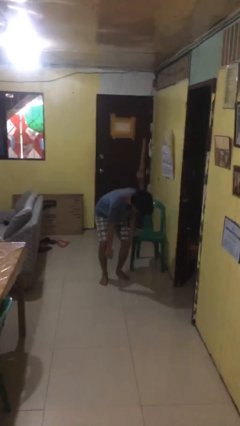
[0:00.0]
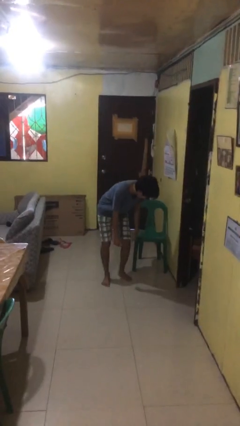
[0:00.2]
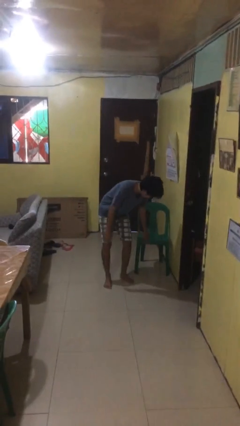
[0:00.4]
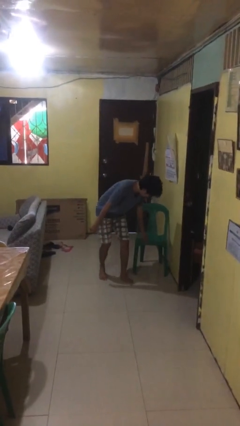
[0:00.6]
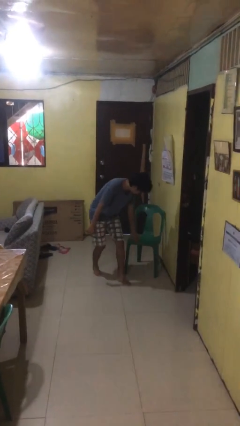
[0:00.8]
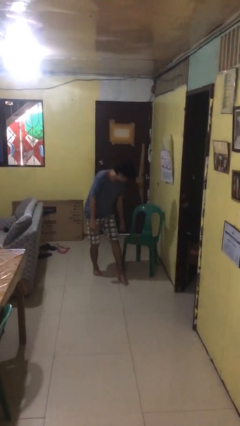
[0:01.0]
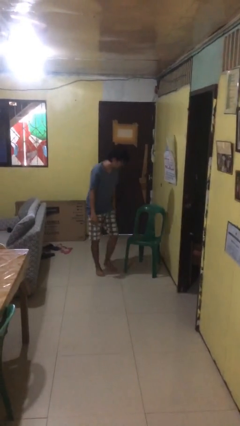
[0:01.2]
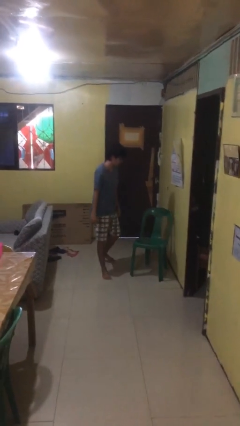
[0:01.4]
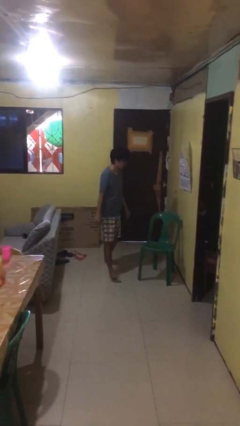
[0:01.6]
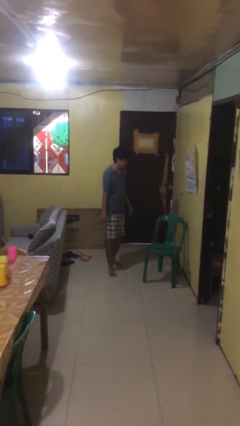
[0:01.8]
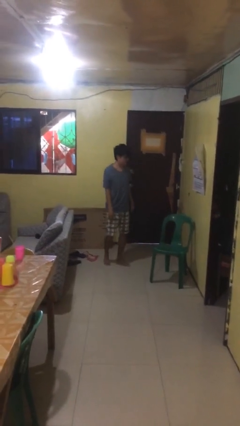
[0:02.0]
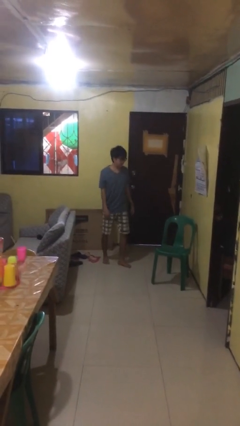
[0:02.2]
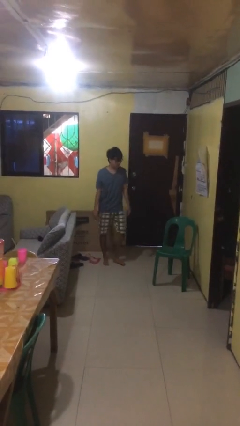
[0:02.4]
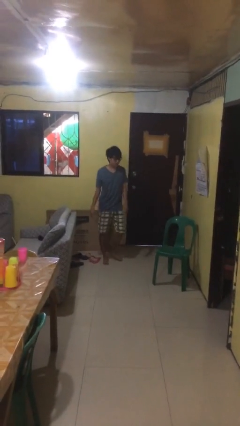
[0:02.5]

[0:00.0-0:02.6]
person stands up from floor

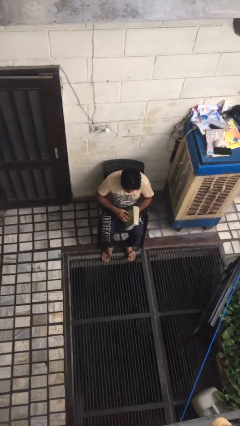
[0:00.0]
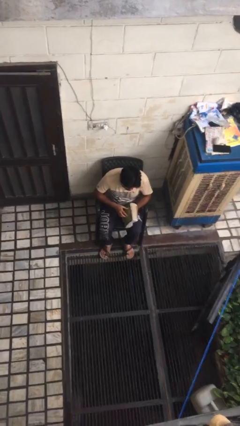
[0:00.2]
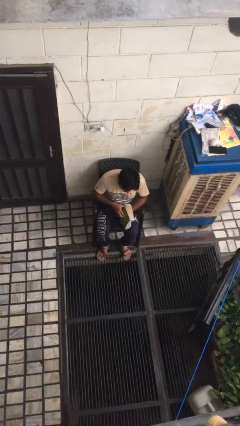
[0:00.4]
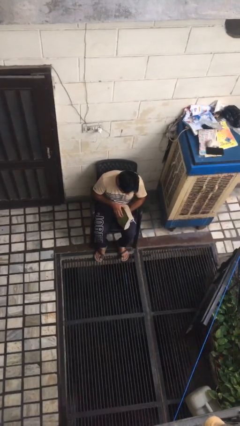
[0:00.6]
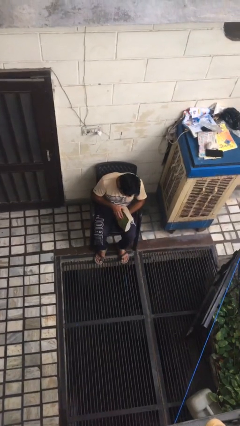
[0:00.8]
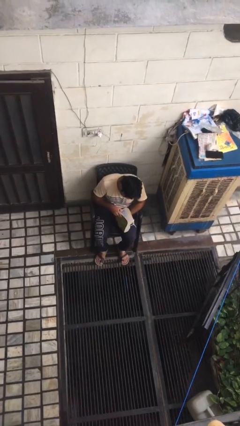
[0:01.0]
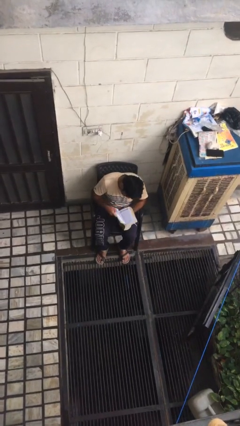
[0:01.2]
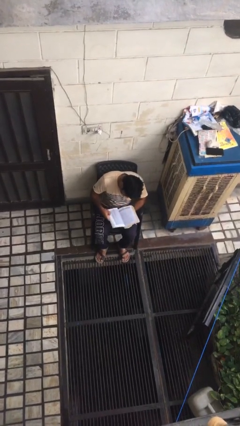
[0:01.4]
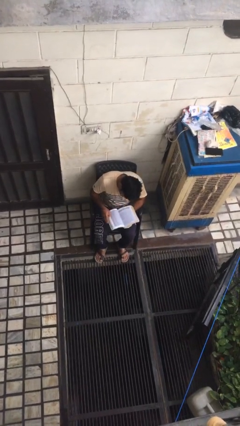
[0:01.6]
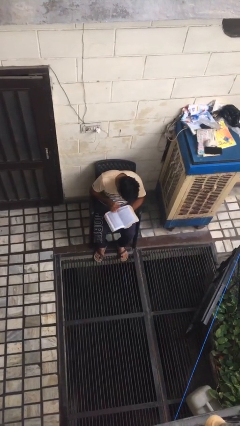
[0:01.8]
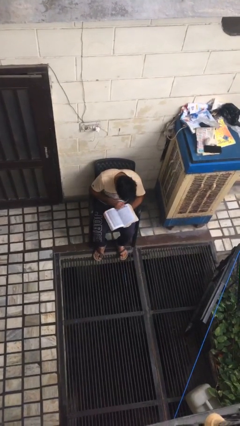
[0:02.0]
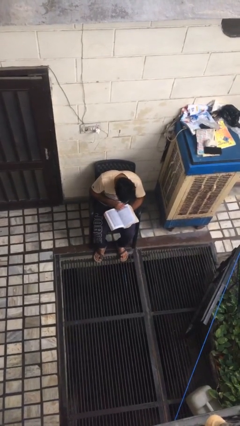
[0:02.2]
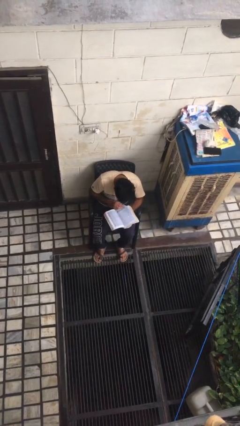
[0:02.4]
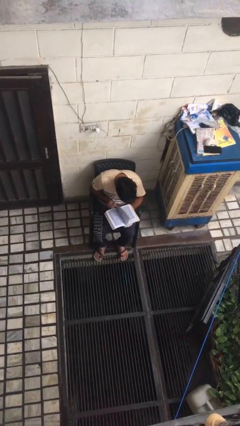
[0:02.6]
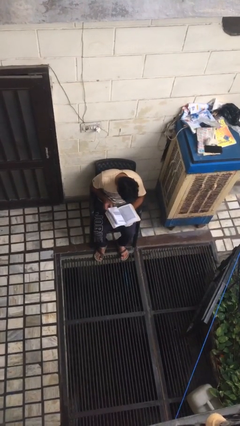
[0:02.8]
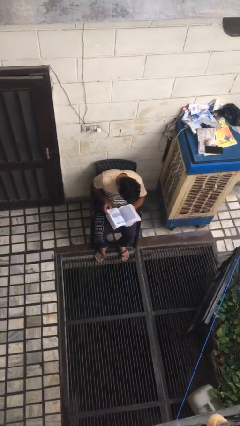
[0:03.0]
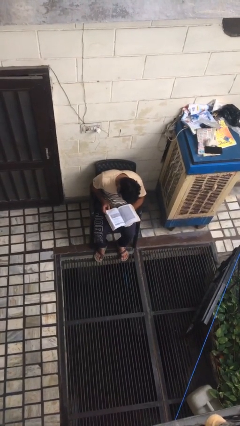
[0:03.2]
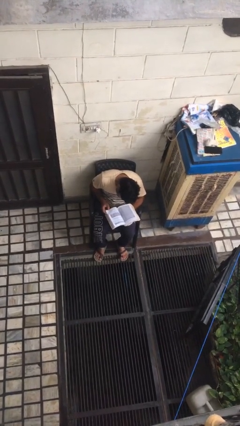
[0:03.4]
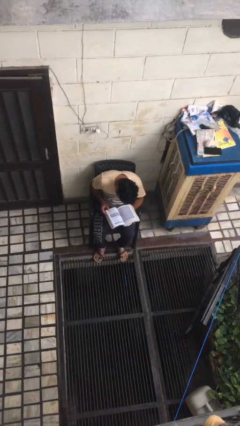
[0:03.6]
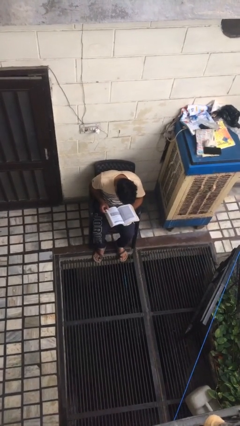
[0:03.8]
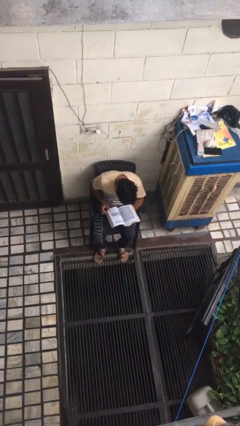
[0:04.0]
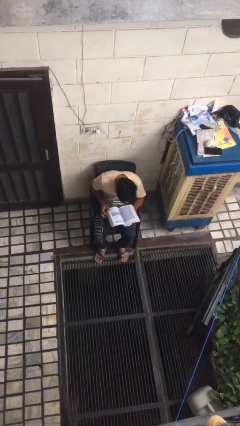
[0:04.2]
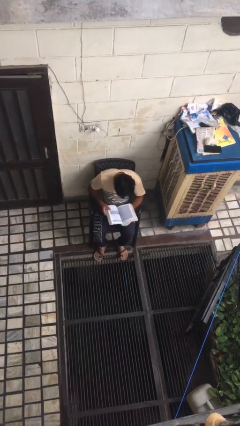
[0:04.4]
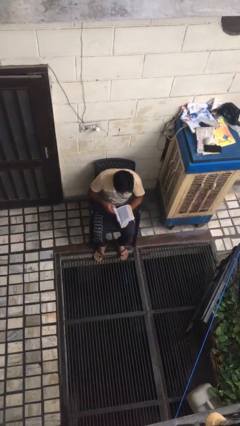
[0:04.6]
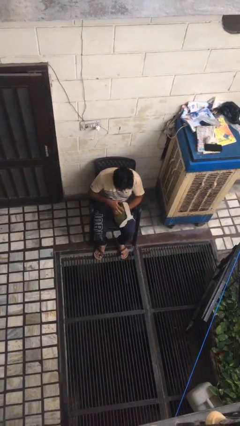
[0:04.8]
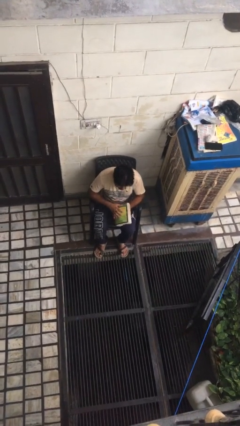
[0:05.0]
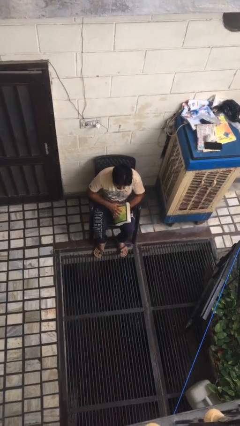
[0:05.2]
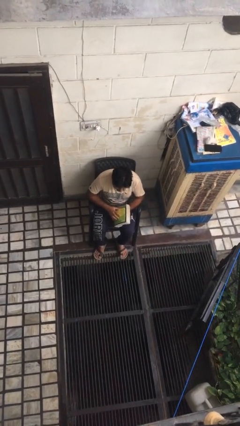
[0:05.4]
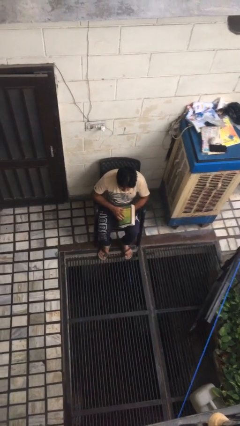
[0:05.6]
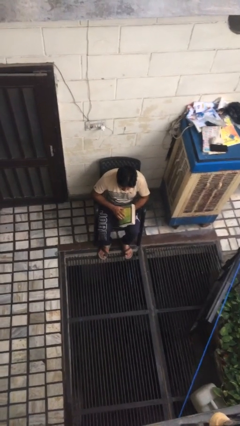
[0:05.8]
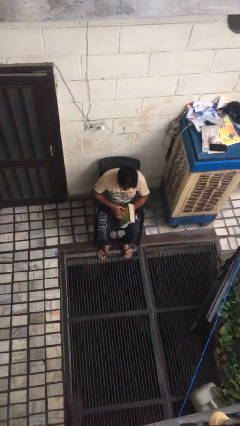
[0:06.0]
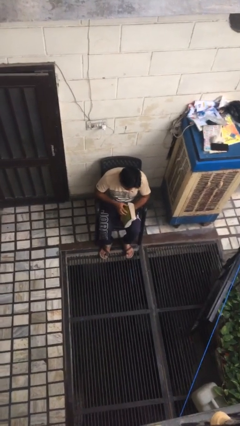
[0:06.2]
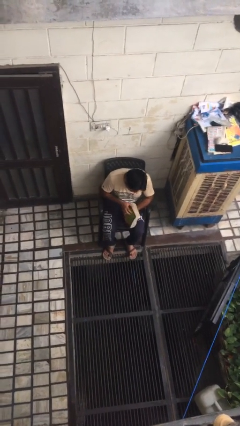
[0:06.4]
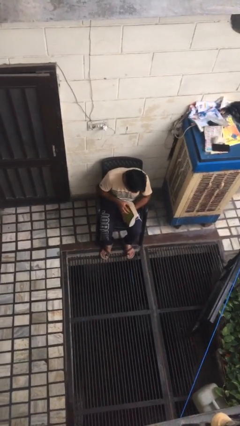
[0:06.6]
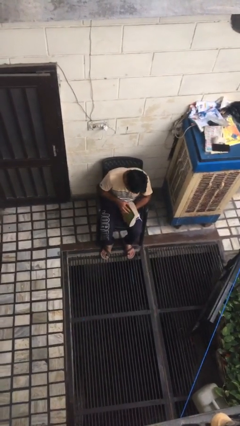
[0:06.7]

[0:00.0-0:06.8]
person reads book

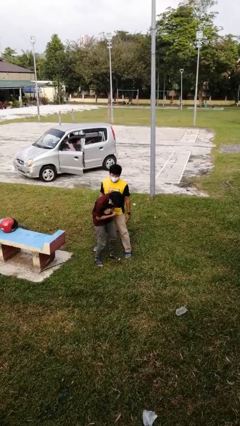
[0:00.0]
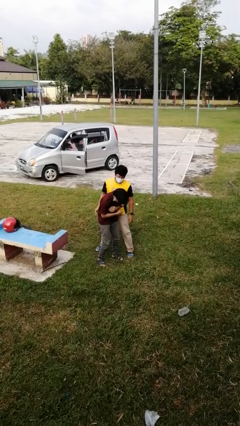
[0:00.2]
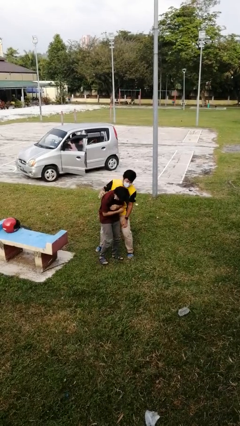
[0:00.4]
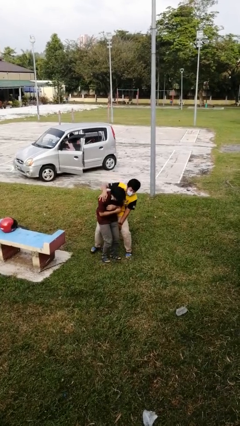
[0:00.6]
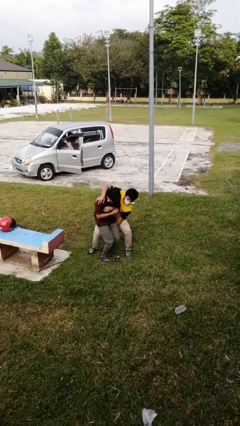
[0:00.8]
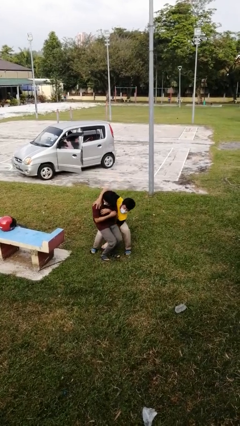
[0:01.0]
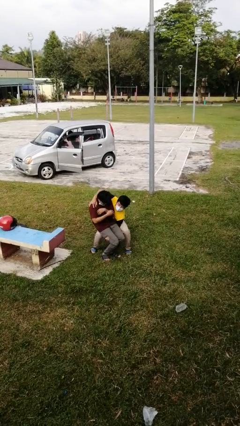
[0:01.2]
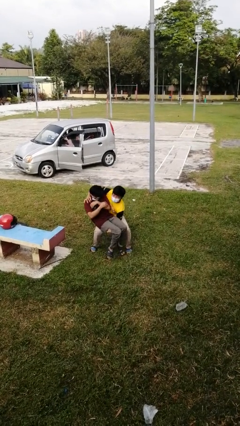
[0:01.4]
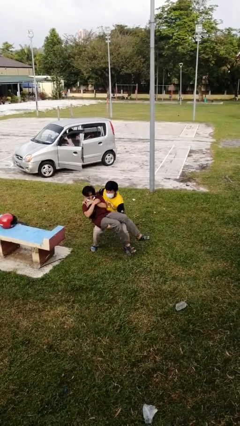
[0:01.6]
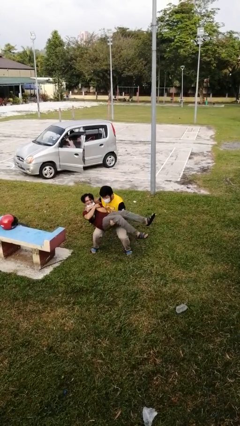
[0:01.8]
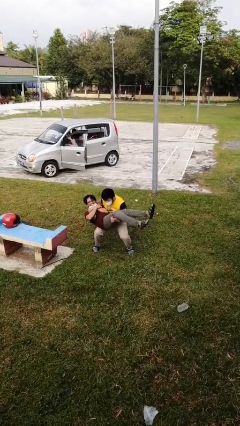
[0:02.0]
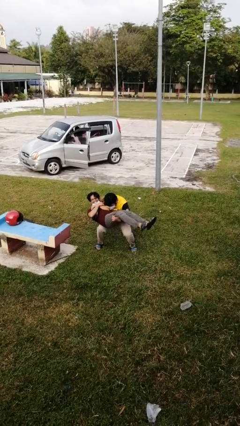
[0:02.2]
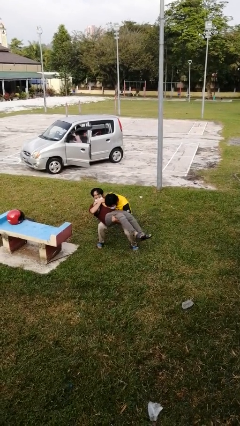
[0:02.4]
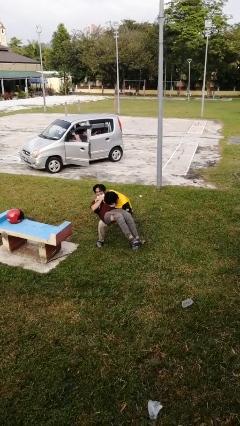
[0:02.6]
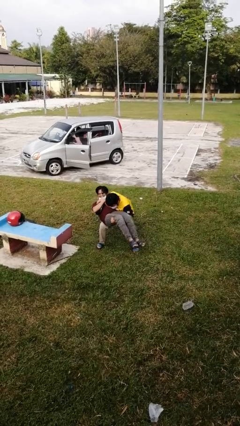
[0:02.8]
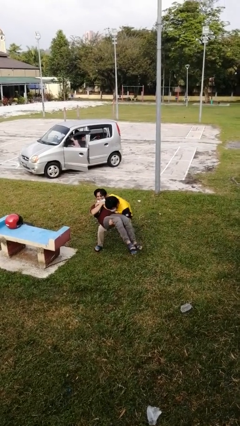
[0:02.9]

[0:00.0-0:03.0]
person picks up person

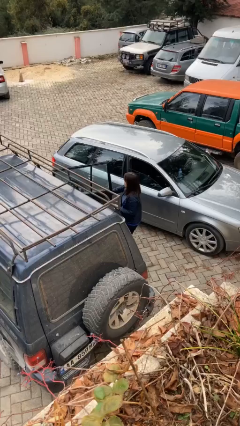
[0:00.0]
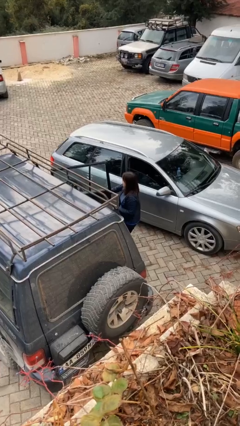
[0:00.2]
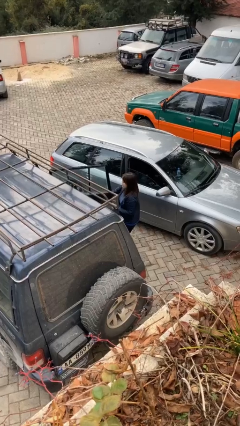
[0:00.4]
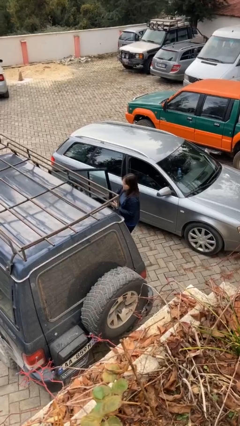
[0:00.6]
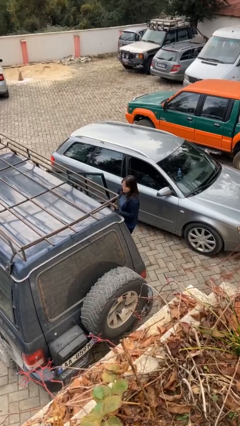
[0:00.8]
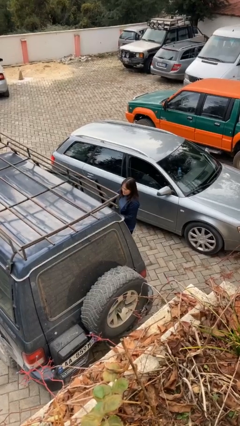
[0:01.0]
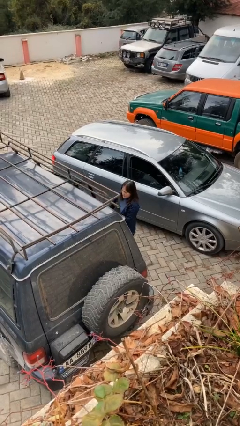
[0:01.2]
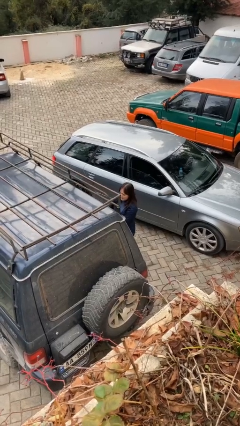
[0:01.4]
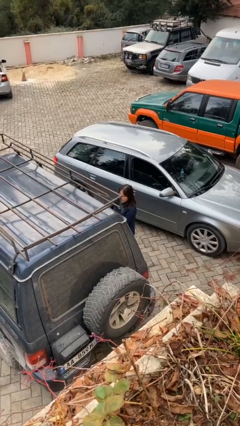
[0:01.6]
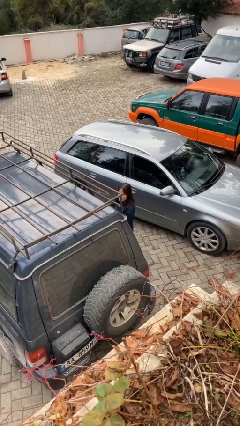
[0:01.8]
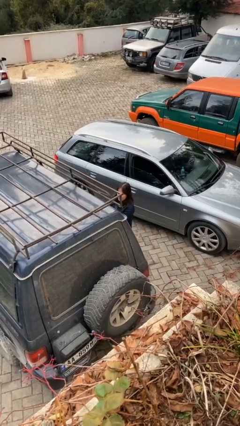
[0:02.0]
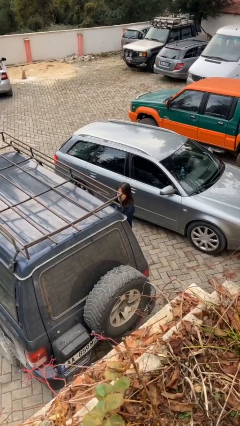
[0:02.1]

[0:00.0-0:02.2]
person closes car door

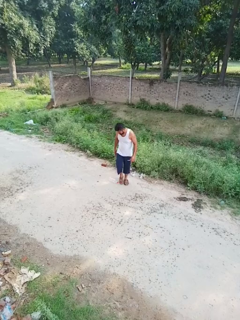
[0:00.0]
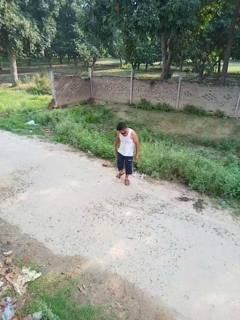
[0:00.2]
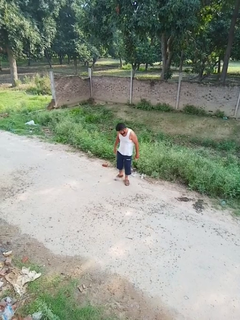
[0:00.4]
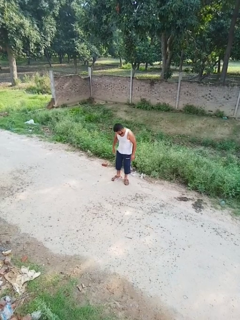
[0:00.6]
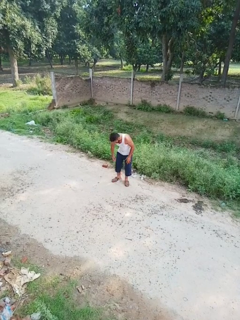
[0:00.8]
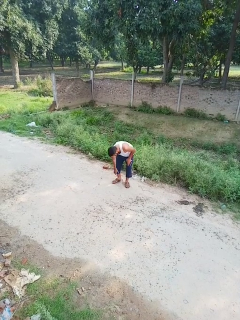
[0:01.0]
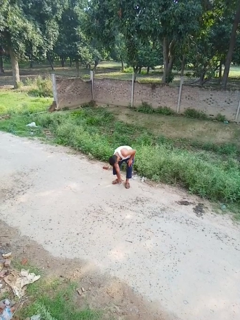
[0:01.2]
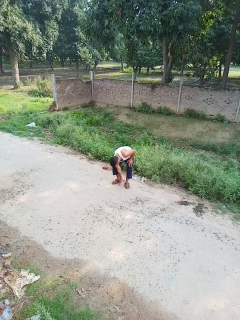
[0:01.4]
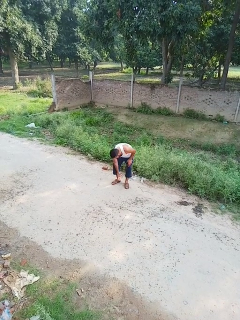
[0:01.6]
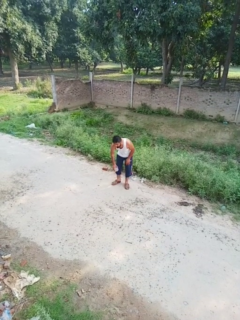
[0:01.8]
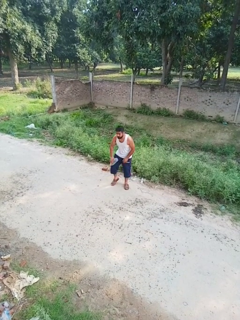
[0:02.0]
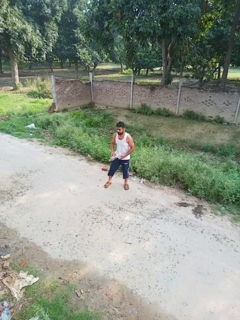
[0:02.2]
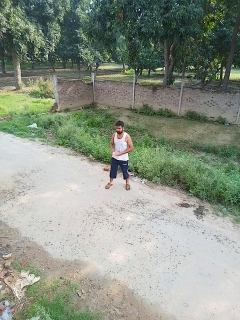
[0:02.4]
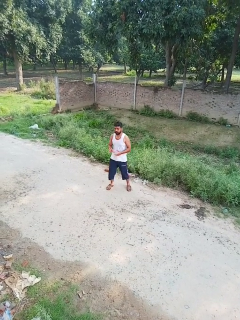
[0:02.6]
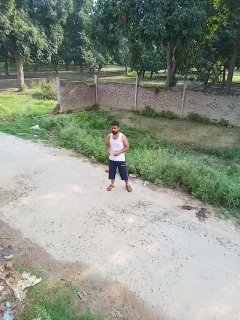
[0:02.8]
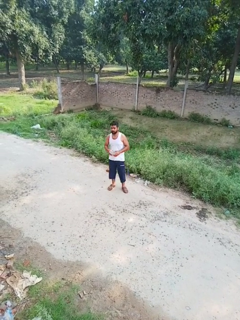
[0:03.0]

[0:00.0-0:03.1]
person picks up object from floor

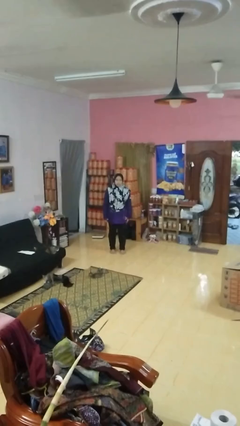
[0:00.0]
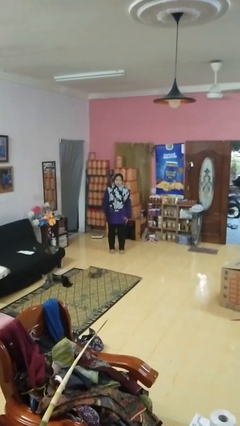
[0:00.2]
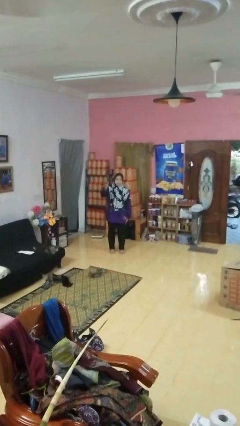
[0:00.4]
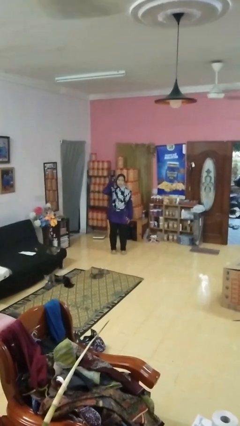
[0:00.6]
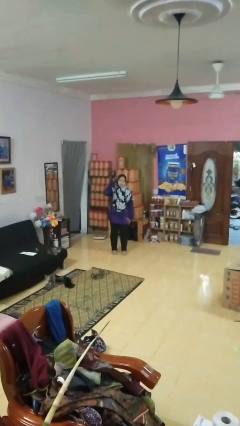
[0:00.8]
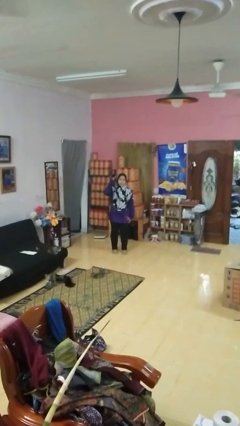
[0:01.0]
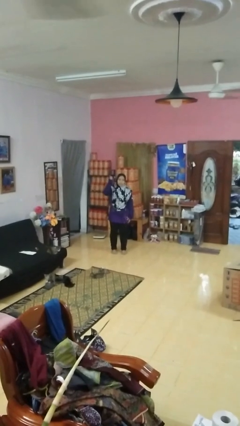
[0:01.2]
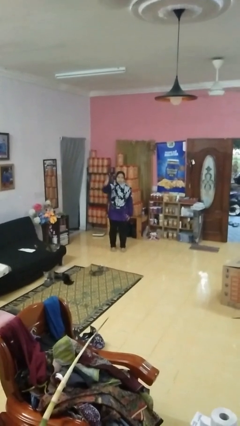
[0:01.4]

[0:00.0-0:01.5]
person gestures behind me
